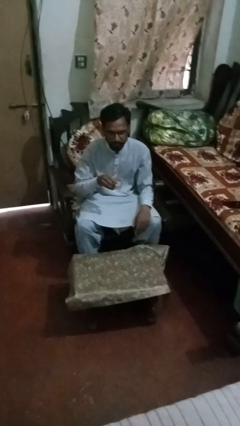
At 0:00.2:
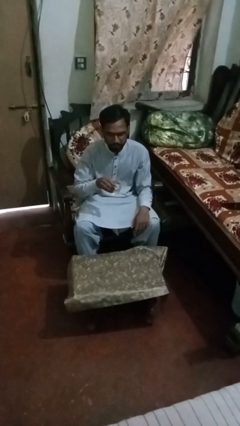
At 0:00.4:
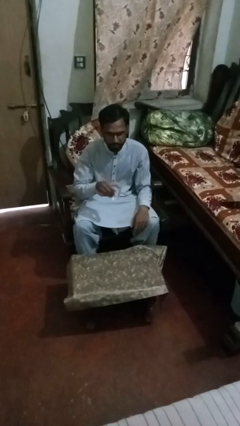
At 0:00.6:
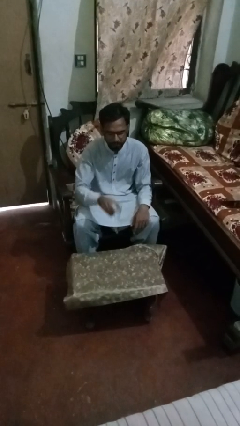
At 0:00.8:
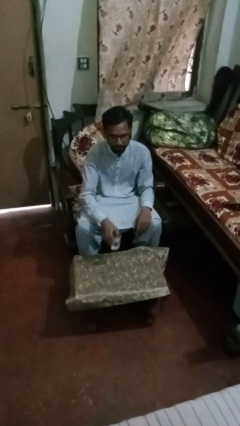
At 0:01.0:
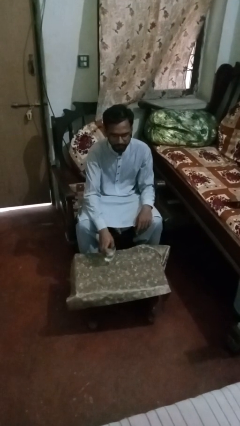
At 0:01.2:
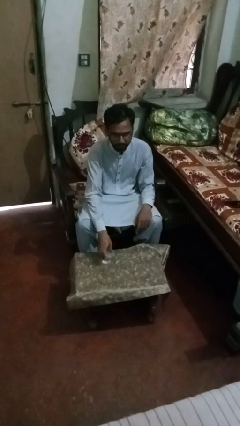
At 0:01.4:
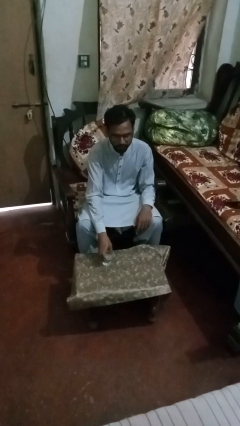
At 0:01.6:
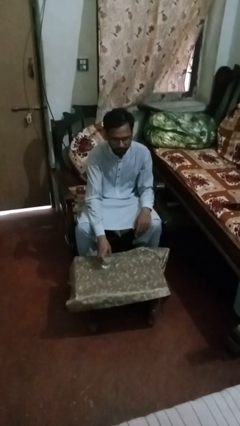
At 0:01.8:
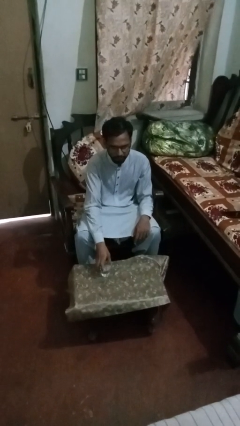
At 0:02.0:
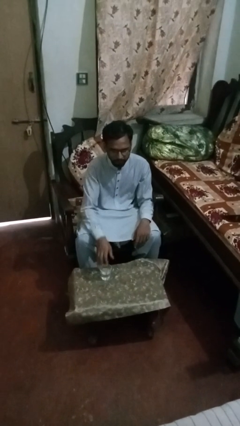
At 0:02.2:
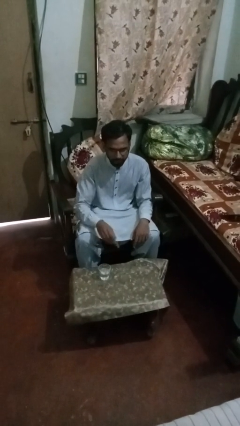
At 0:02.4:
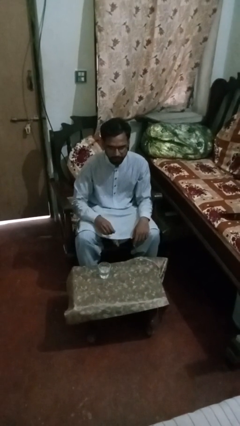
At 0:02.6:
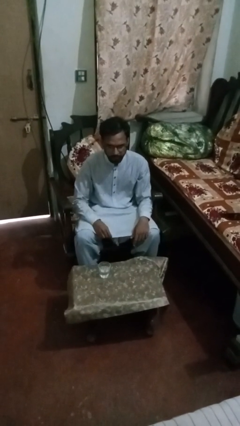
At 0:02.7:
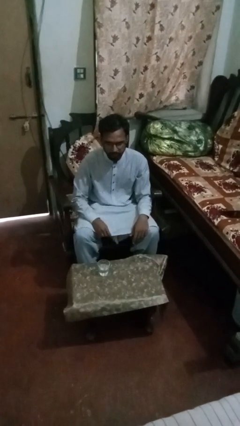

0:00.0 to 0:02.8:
person puts down object on table

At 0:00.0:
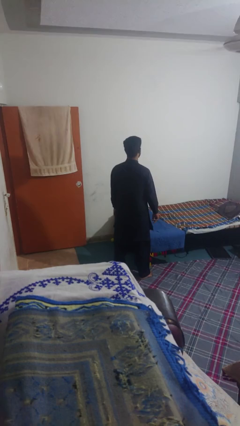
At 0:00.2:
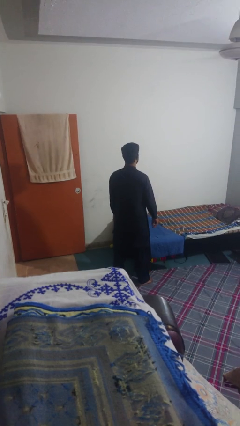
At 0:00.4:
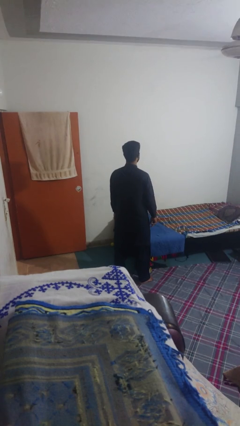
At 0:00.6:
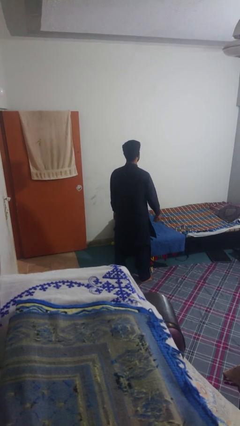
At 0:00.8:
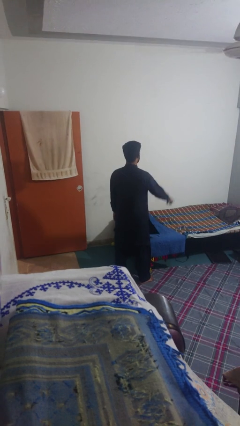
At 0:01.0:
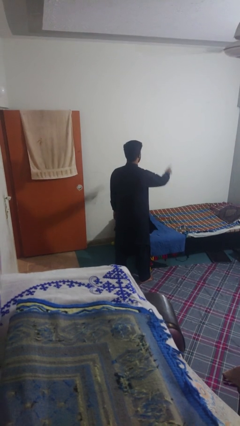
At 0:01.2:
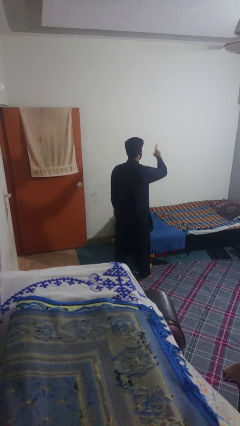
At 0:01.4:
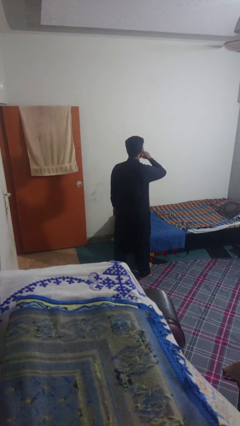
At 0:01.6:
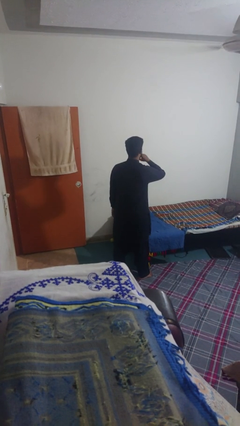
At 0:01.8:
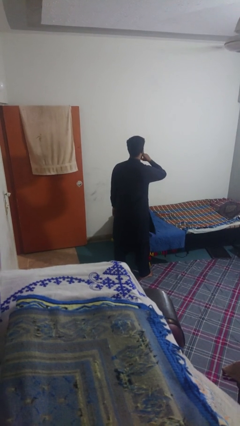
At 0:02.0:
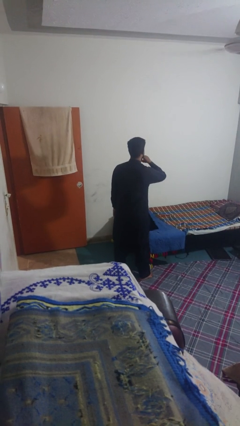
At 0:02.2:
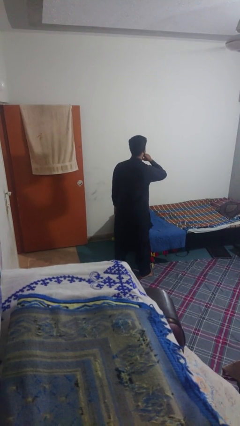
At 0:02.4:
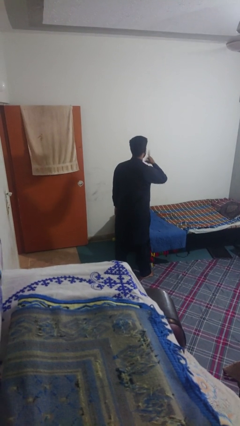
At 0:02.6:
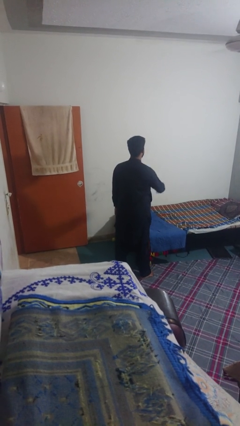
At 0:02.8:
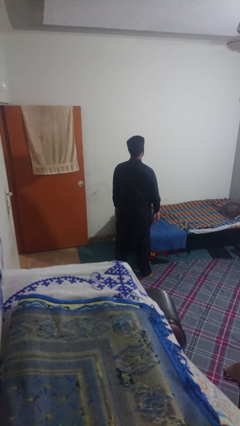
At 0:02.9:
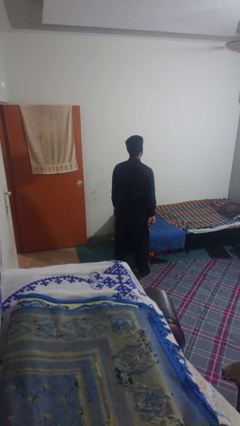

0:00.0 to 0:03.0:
person gestures be quiet

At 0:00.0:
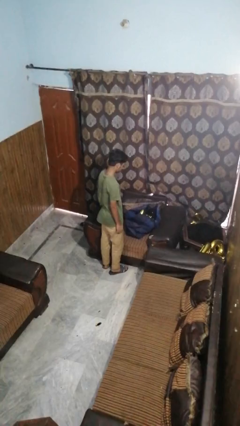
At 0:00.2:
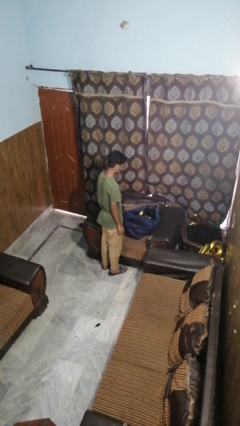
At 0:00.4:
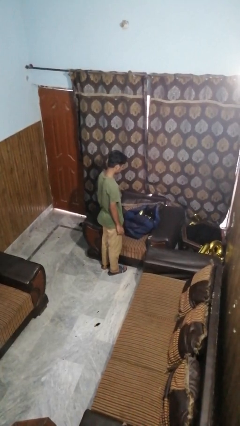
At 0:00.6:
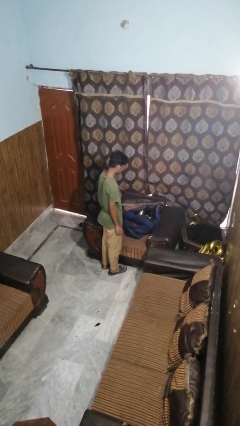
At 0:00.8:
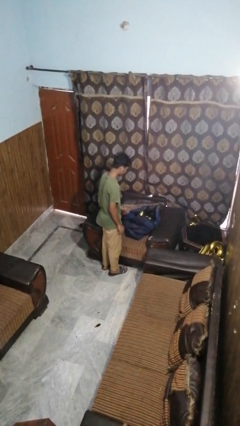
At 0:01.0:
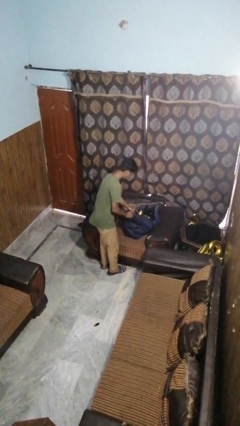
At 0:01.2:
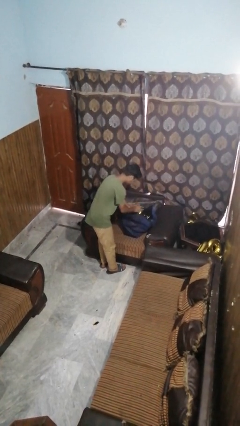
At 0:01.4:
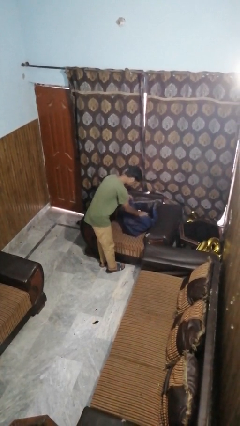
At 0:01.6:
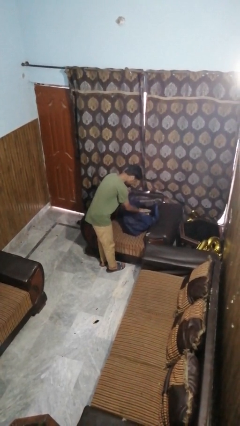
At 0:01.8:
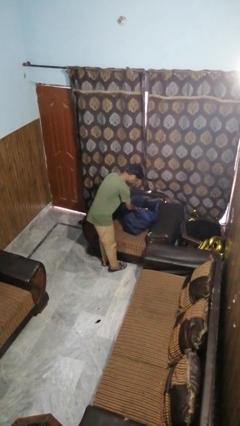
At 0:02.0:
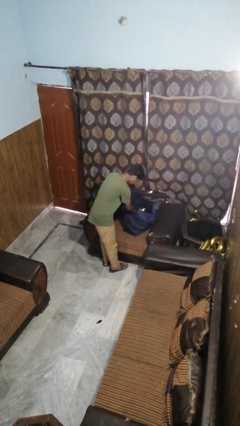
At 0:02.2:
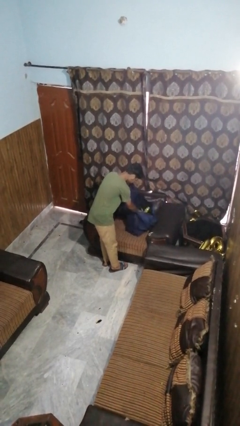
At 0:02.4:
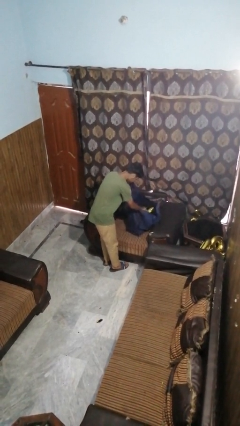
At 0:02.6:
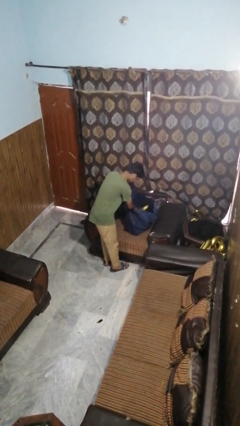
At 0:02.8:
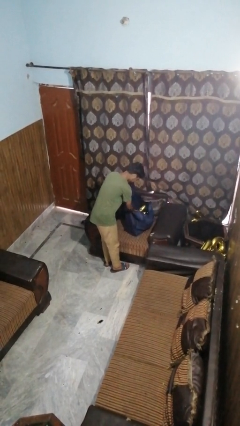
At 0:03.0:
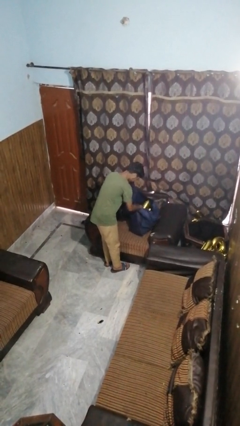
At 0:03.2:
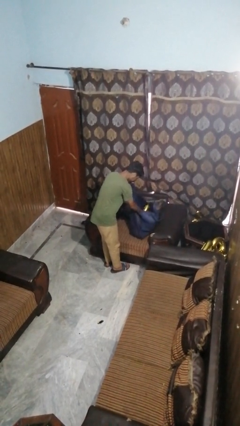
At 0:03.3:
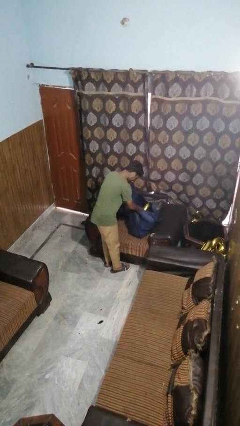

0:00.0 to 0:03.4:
person searches in bag

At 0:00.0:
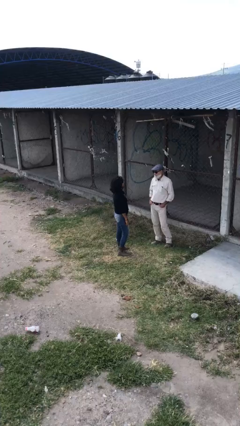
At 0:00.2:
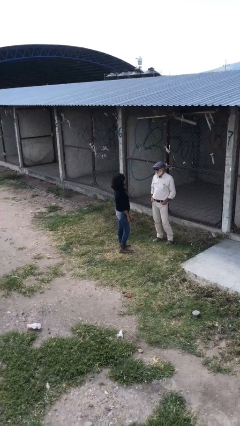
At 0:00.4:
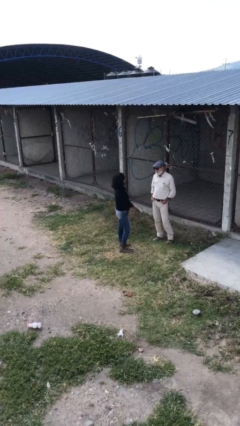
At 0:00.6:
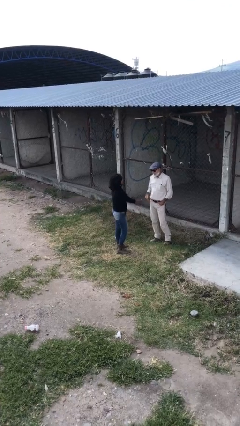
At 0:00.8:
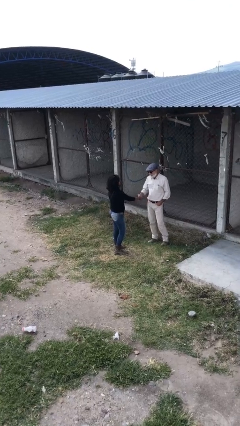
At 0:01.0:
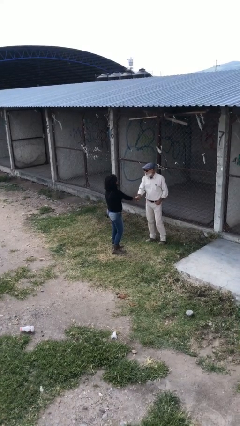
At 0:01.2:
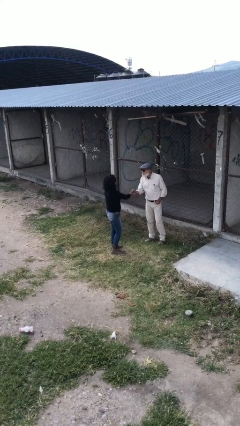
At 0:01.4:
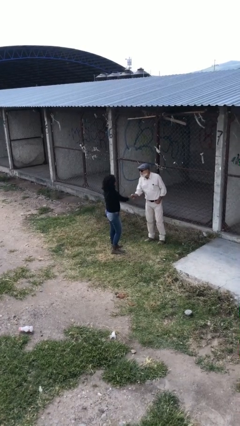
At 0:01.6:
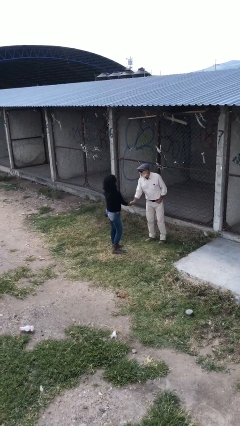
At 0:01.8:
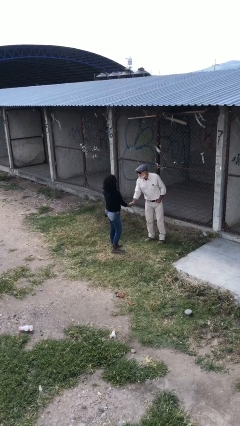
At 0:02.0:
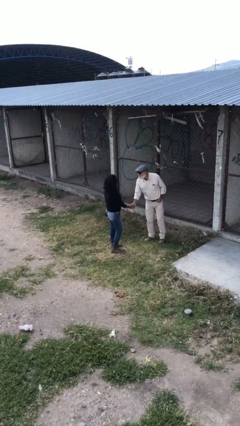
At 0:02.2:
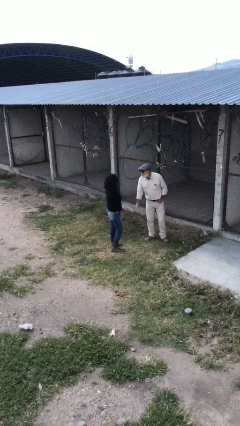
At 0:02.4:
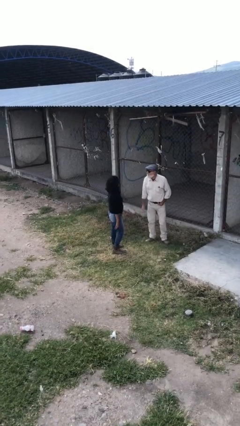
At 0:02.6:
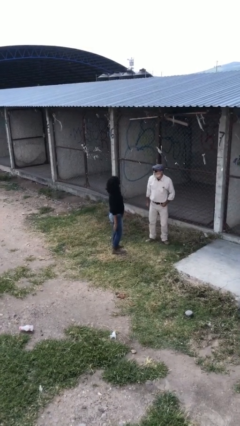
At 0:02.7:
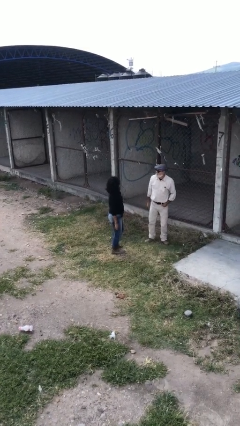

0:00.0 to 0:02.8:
person shakes hand

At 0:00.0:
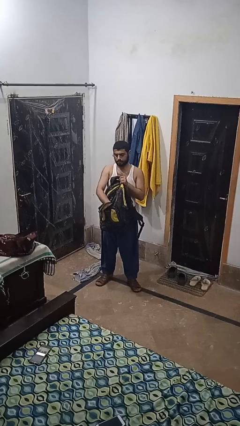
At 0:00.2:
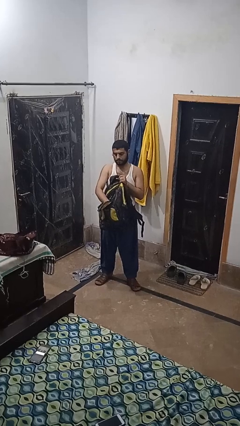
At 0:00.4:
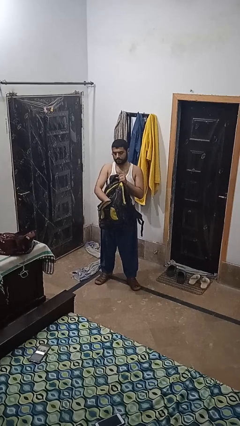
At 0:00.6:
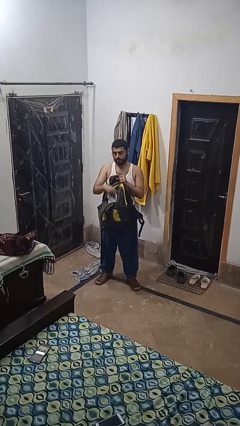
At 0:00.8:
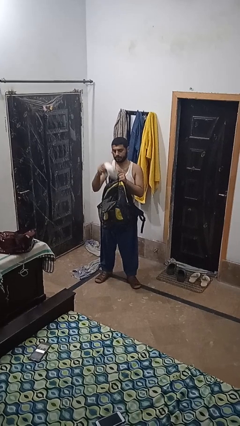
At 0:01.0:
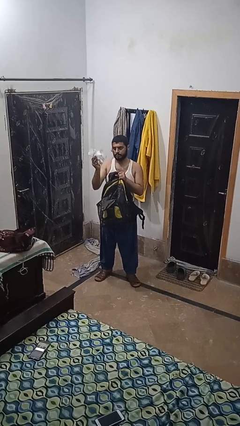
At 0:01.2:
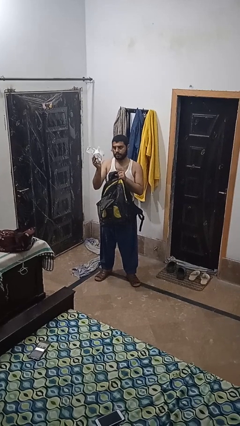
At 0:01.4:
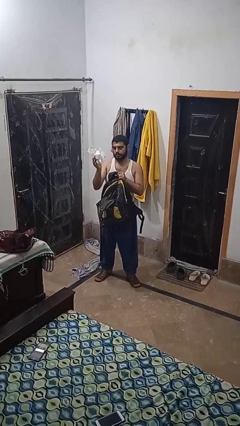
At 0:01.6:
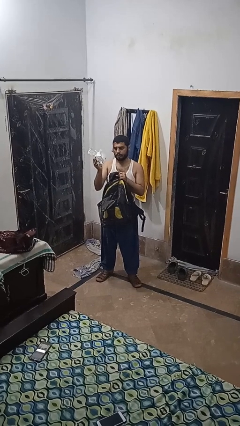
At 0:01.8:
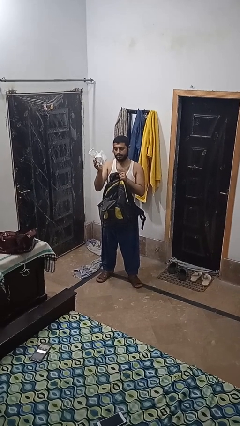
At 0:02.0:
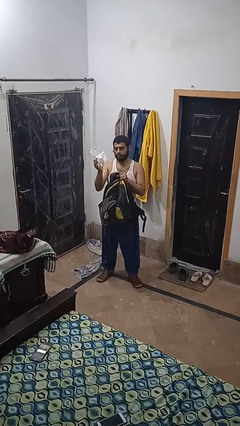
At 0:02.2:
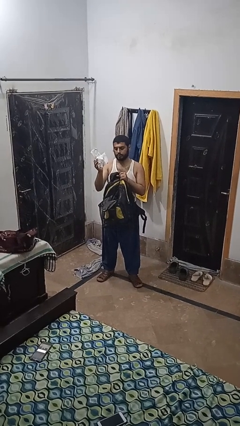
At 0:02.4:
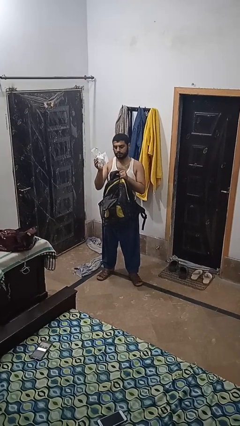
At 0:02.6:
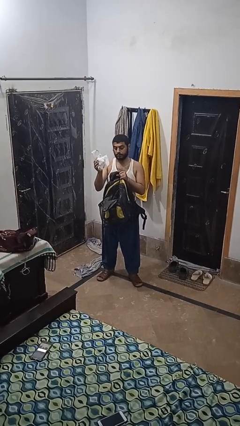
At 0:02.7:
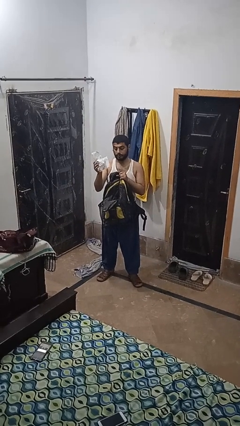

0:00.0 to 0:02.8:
person takes object from backpack

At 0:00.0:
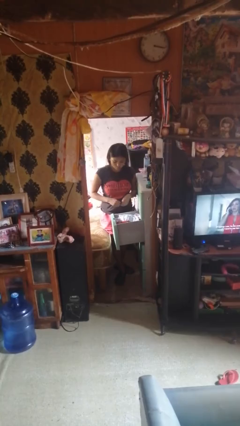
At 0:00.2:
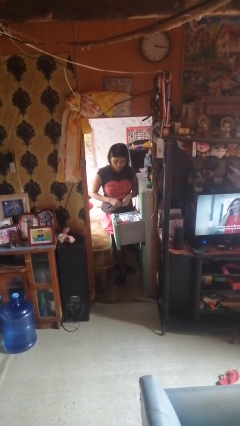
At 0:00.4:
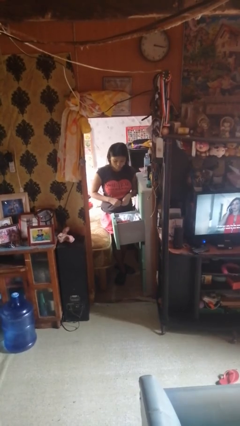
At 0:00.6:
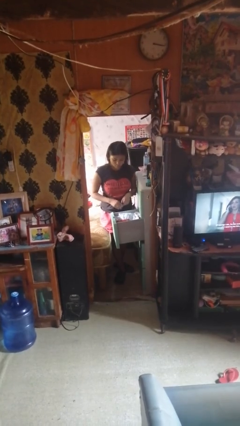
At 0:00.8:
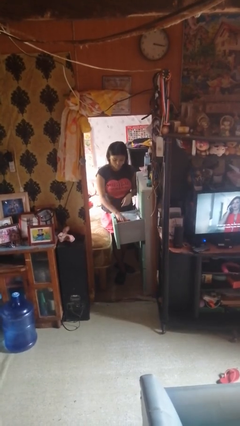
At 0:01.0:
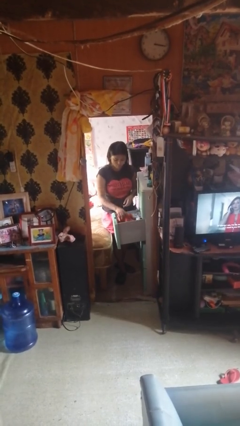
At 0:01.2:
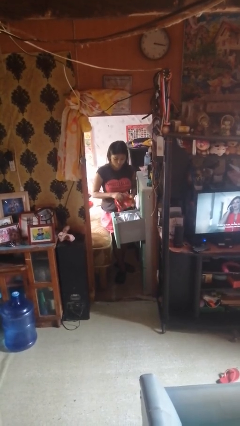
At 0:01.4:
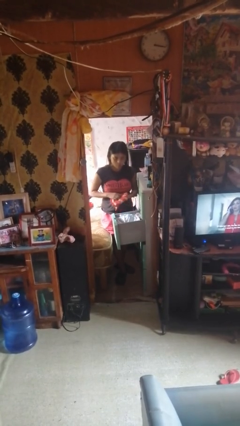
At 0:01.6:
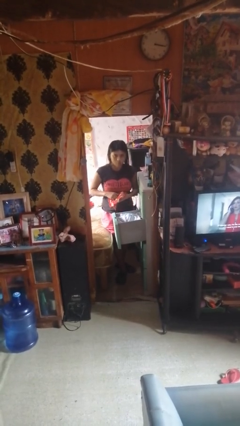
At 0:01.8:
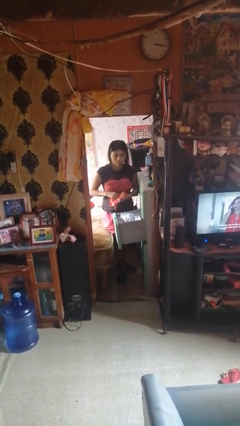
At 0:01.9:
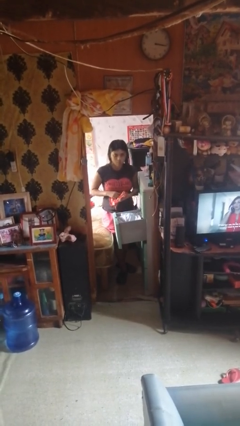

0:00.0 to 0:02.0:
person takes clothes from dresser

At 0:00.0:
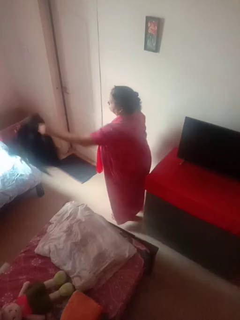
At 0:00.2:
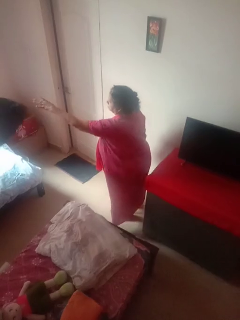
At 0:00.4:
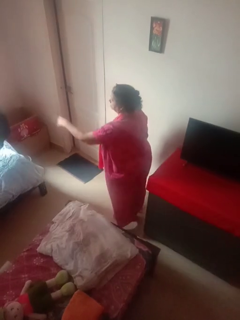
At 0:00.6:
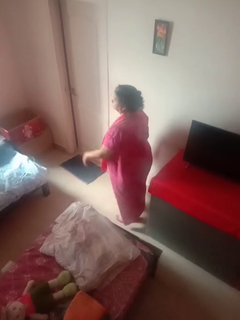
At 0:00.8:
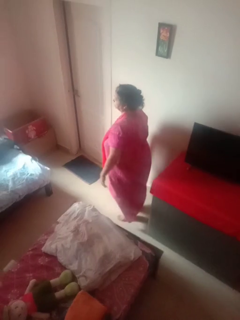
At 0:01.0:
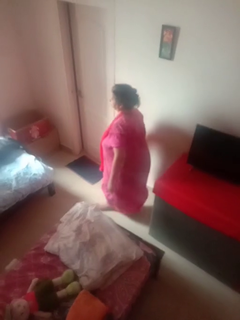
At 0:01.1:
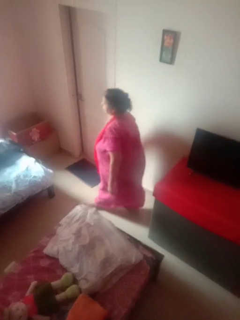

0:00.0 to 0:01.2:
person throws object on bed
